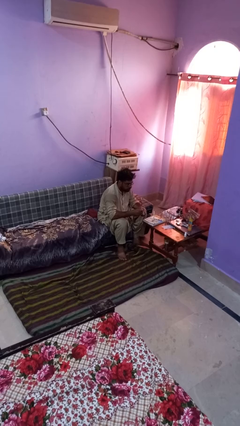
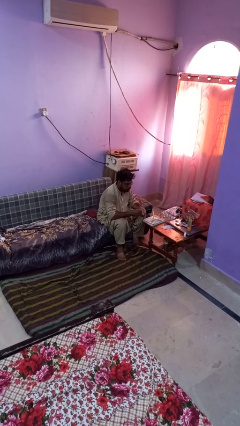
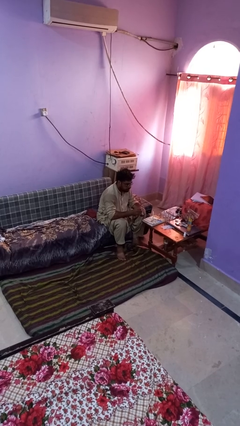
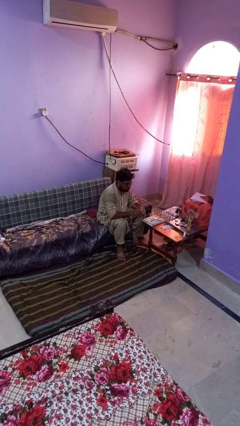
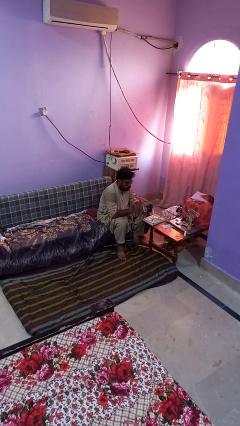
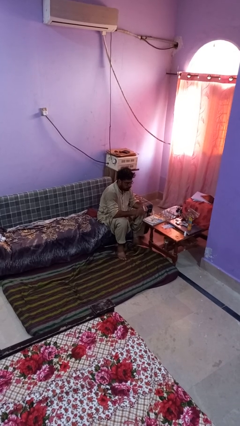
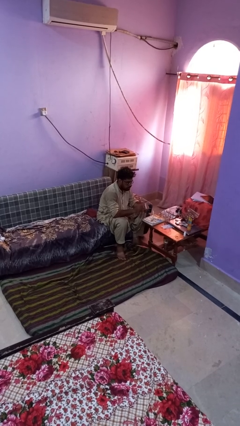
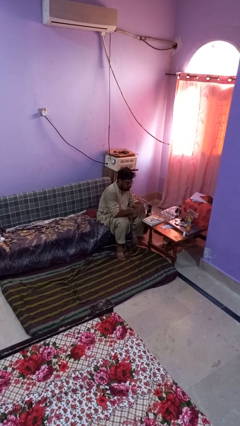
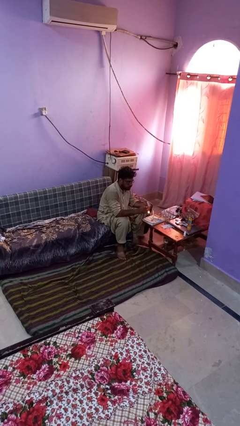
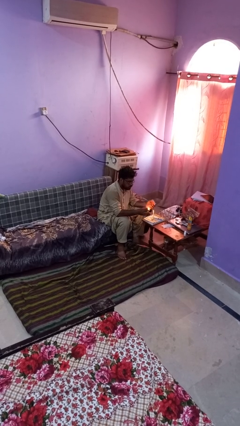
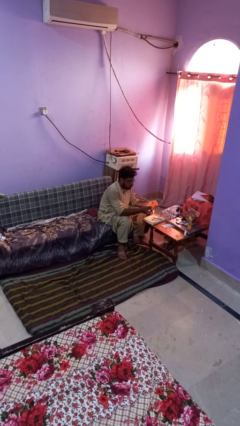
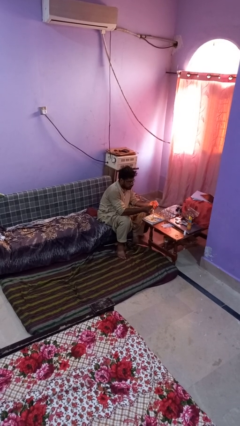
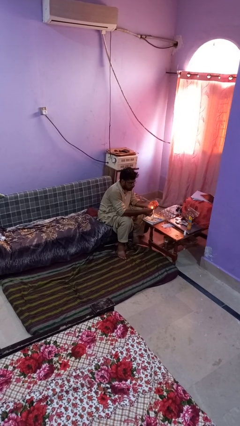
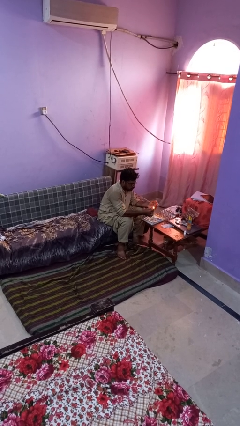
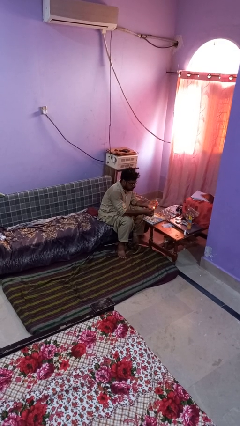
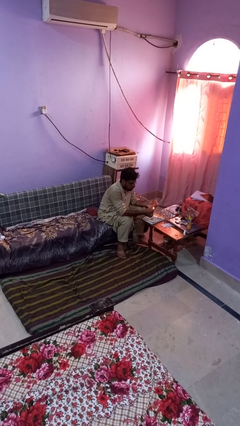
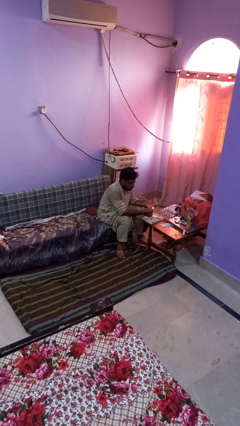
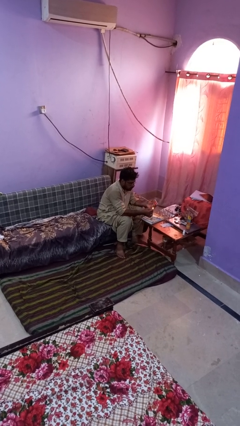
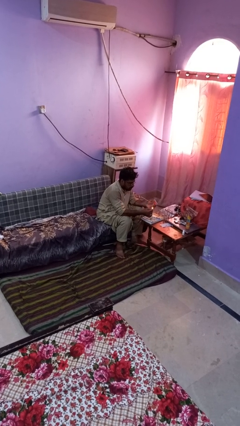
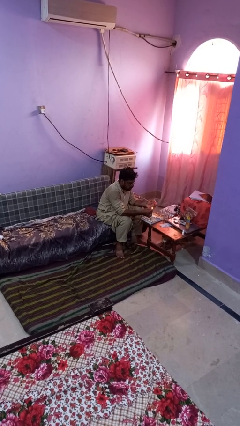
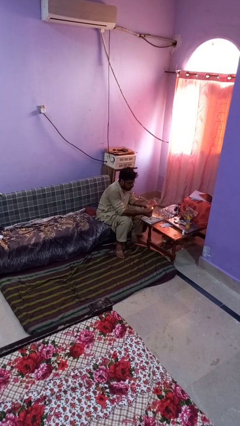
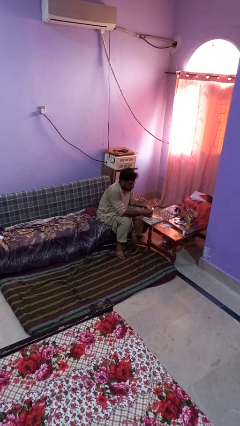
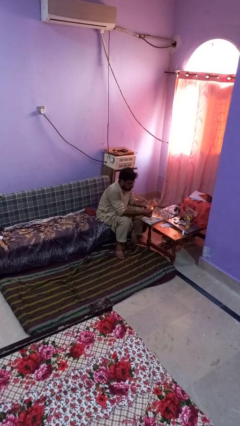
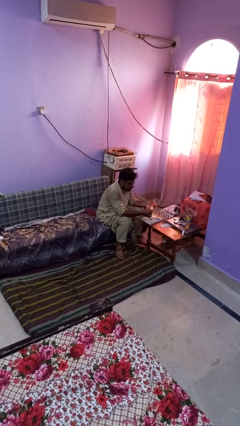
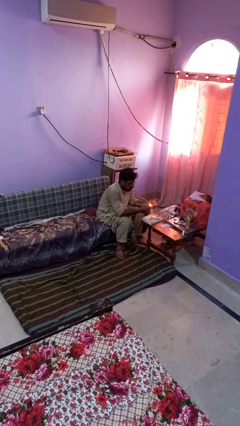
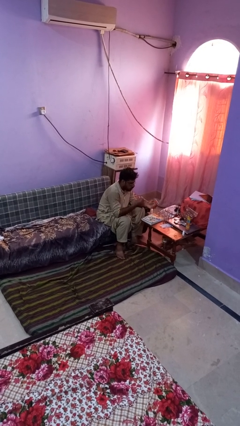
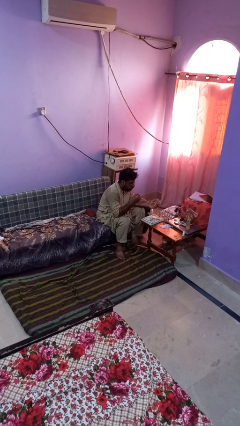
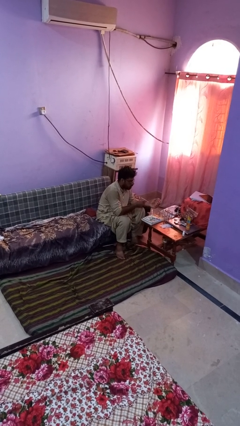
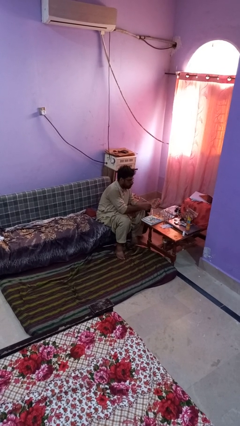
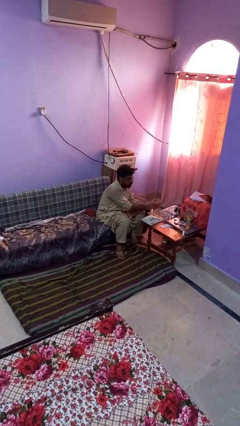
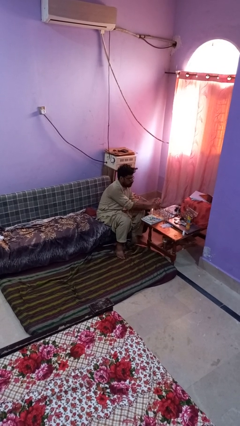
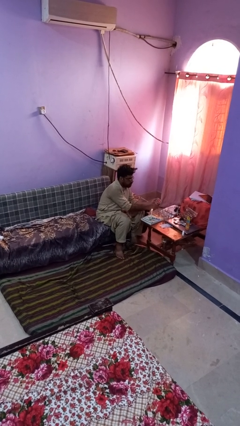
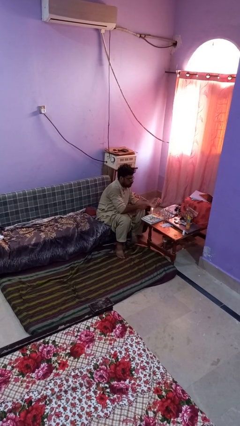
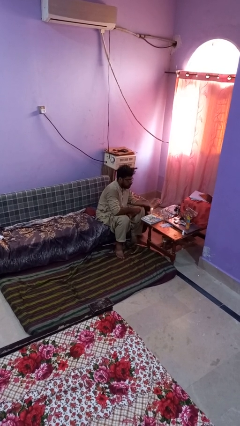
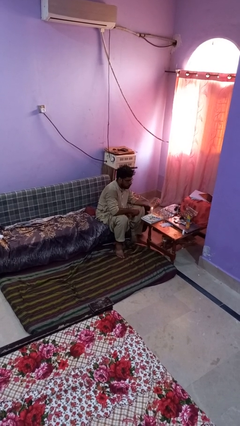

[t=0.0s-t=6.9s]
person lights candle

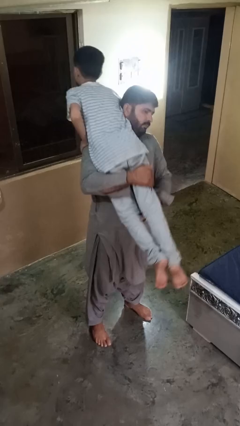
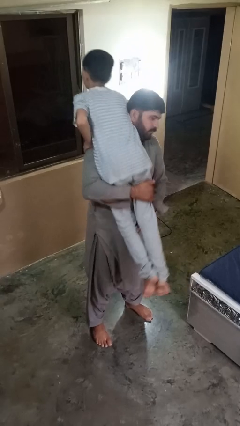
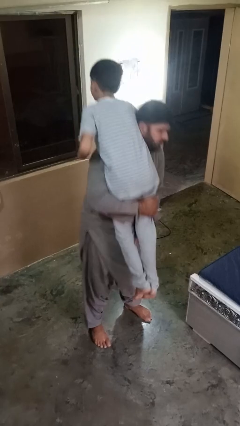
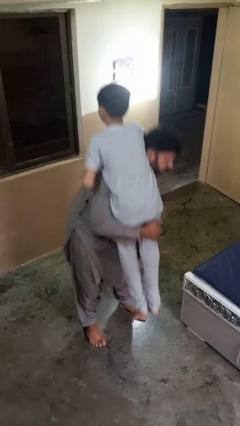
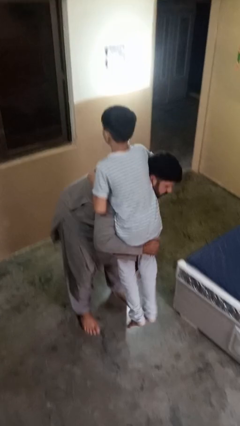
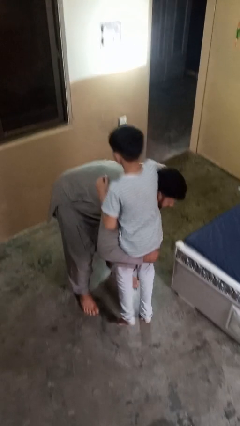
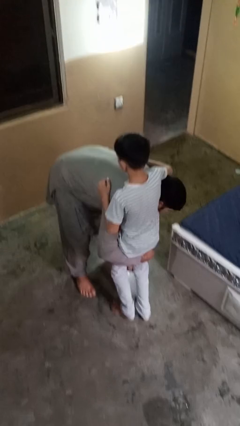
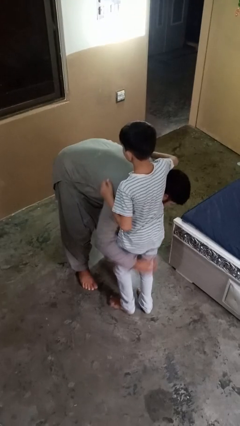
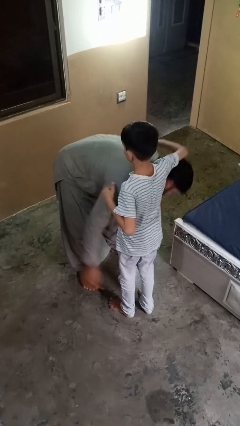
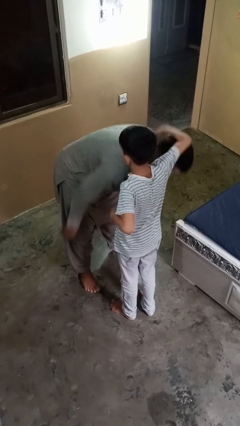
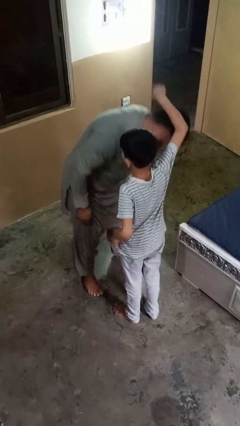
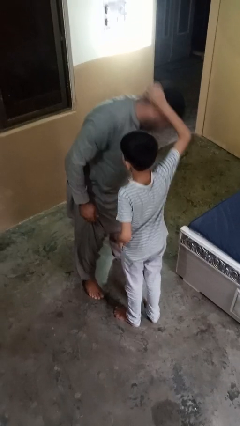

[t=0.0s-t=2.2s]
person carries person on shoulders

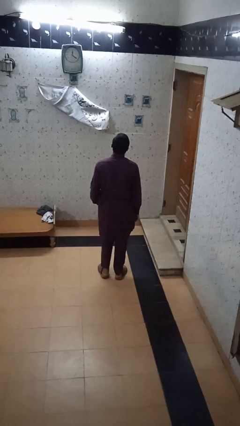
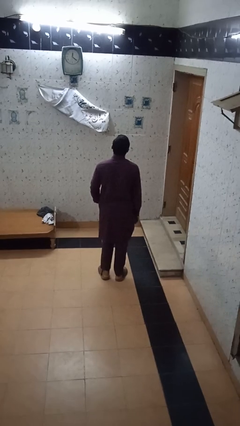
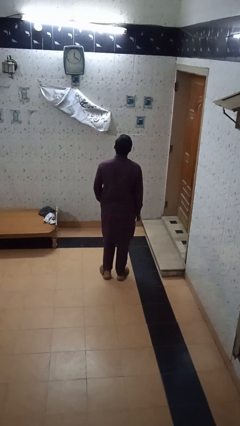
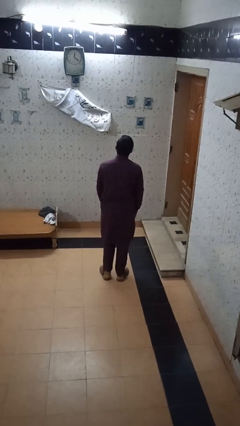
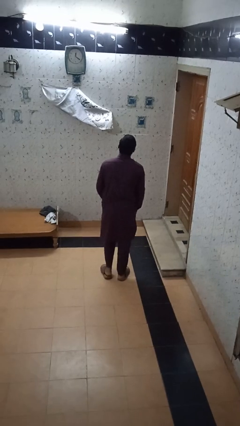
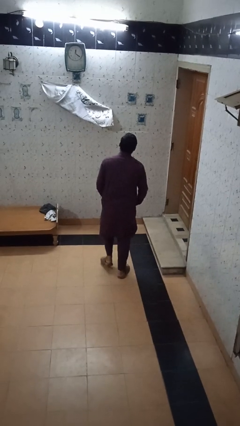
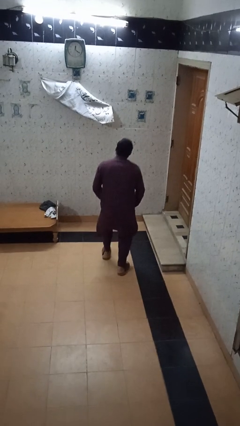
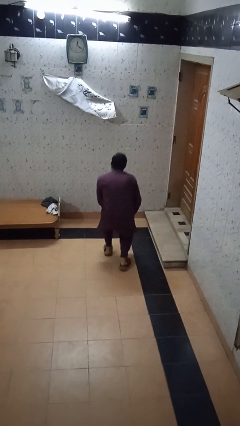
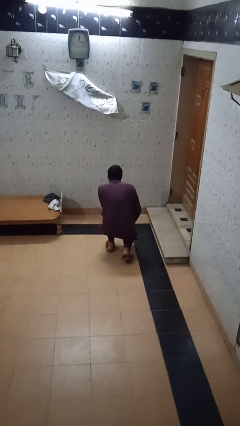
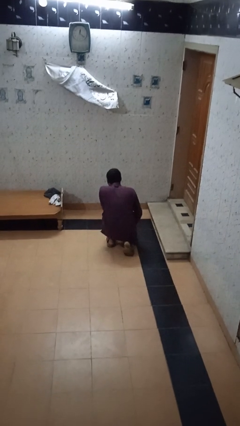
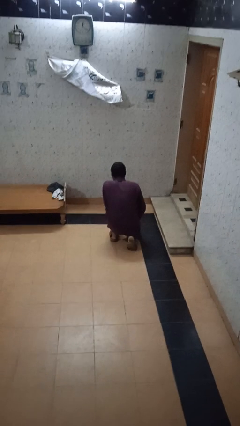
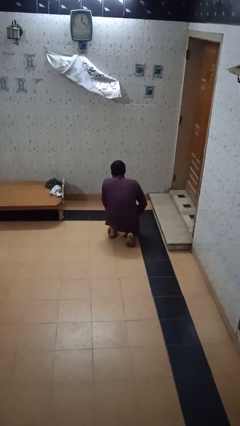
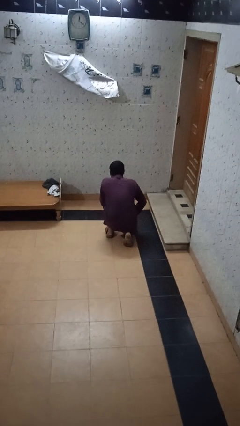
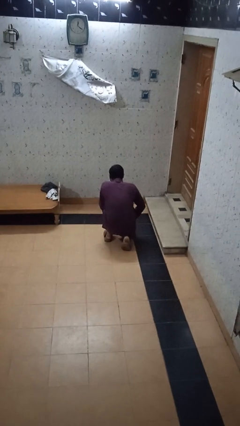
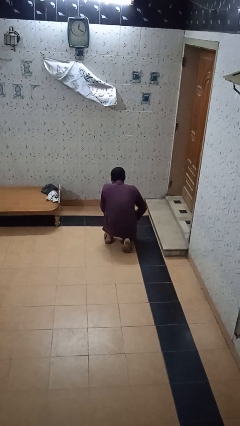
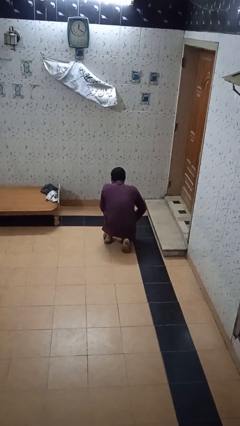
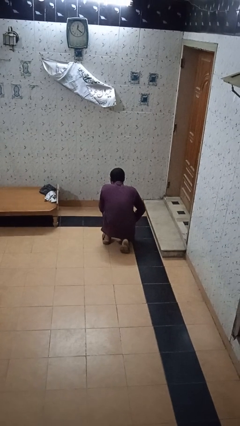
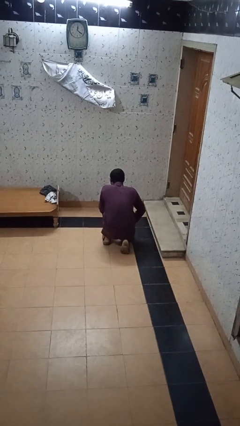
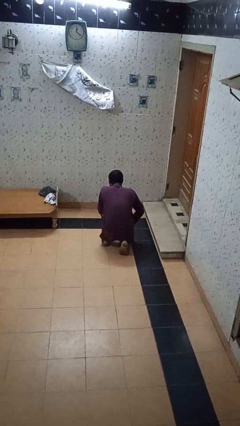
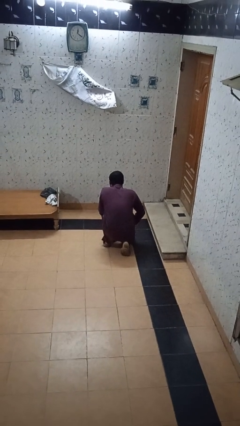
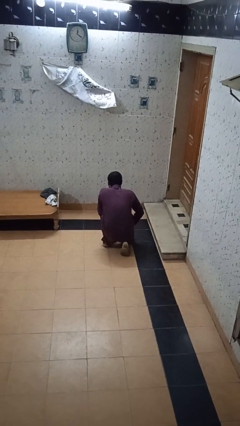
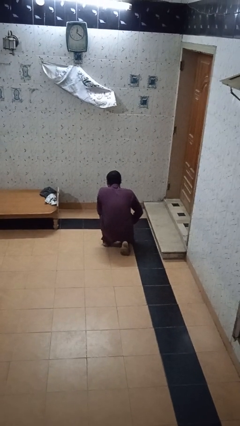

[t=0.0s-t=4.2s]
person kneels

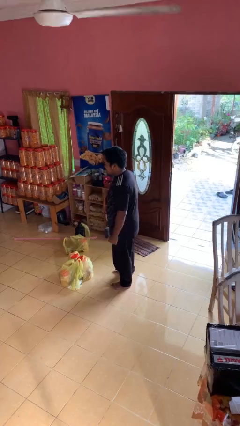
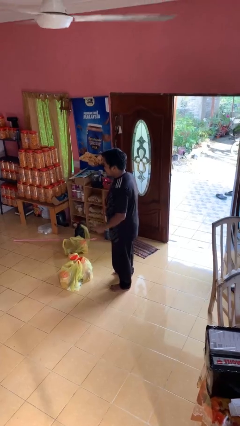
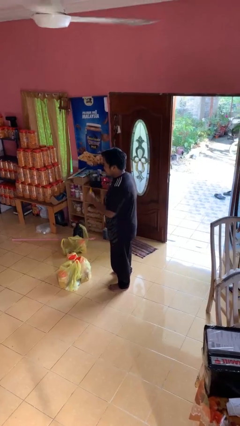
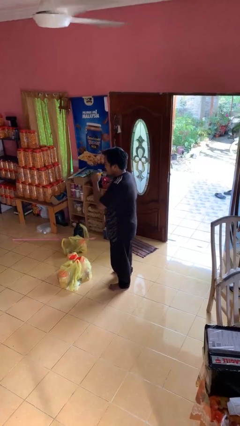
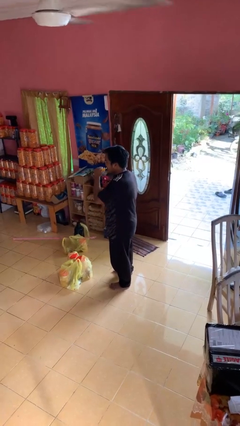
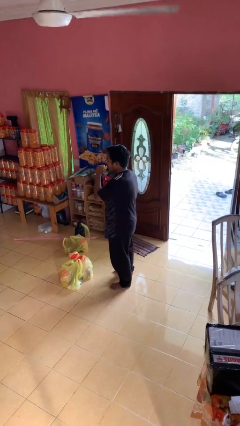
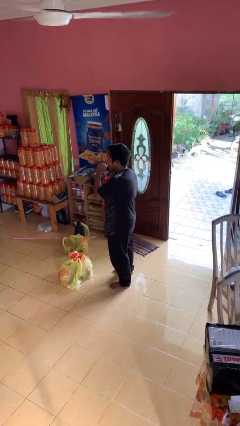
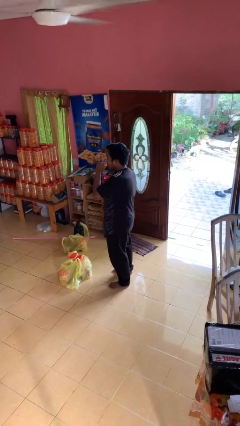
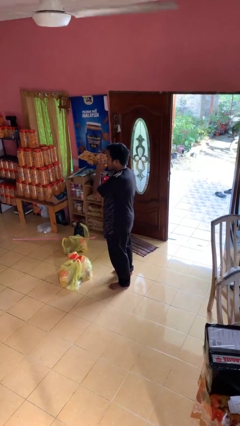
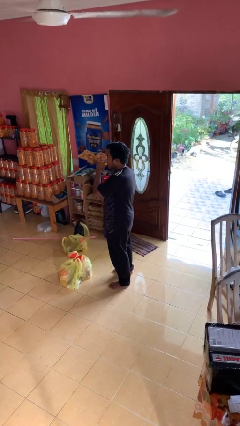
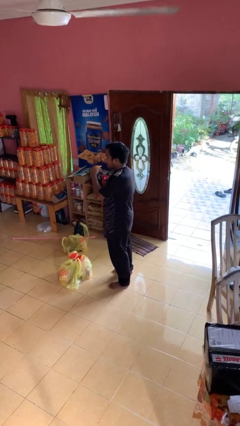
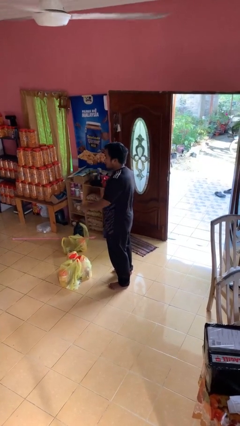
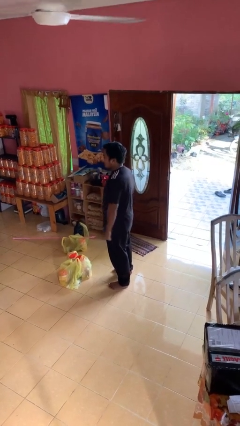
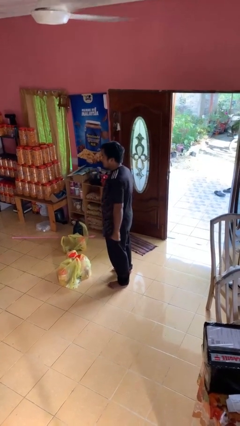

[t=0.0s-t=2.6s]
person eats banana

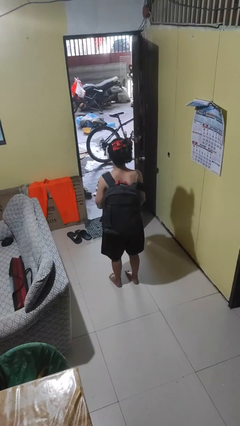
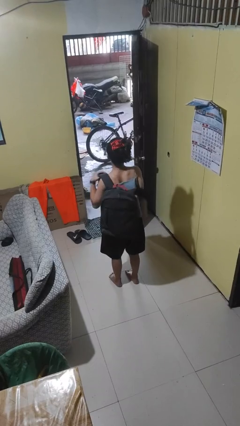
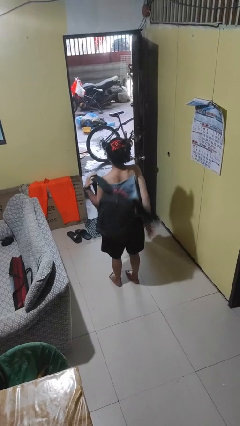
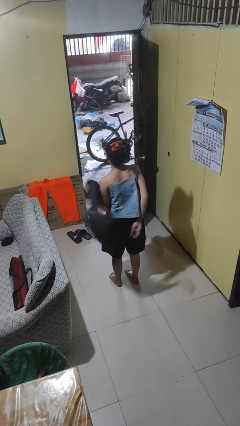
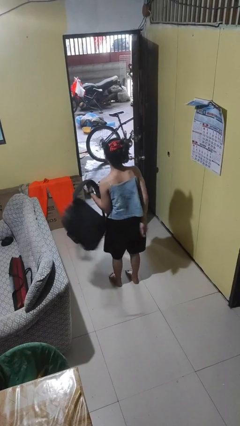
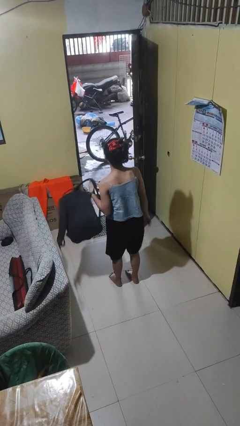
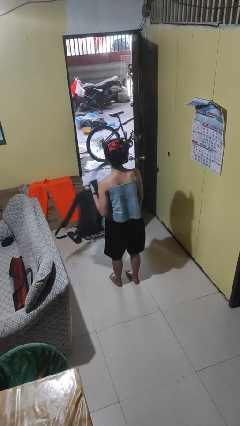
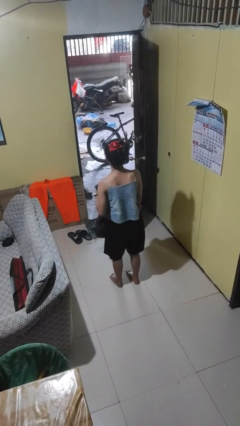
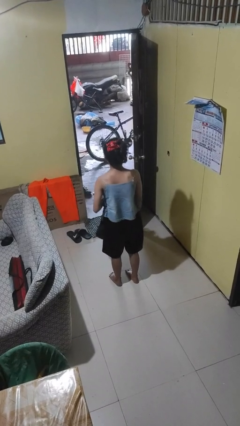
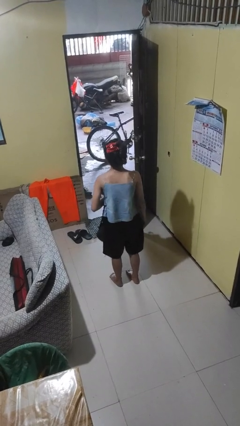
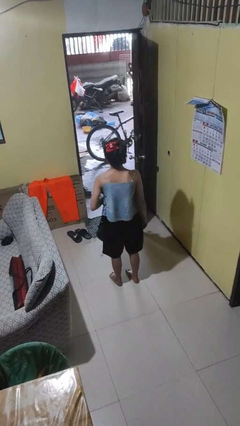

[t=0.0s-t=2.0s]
person takes off backpack
